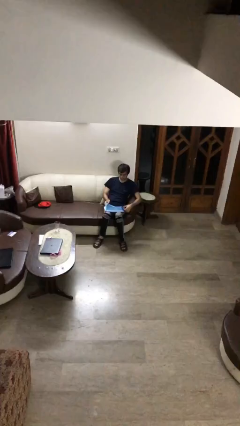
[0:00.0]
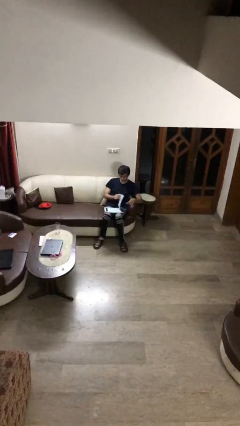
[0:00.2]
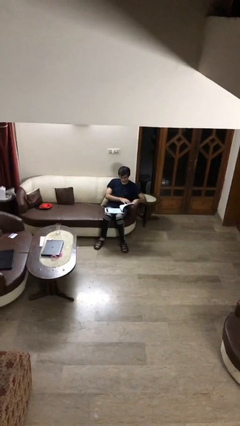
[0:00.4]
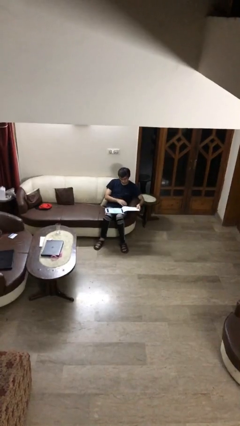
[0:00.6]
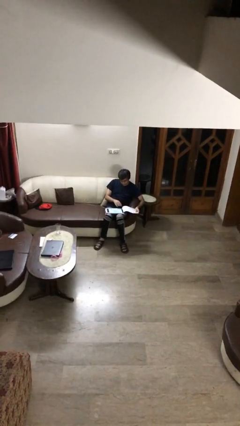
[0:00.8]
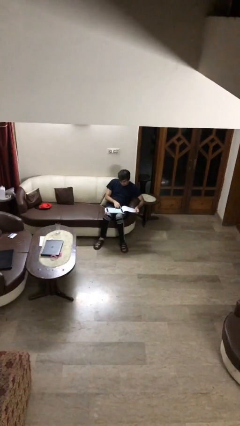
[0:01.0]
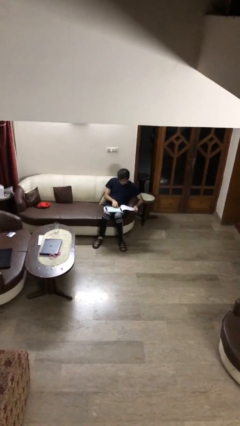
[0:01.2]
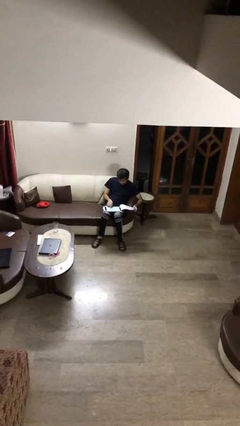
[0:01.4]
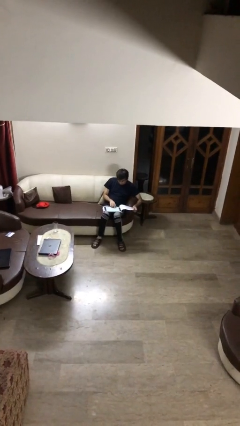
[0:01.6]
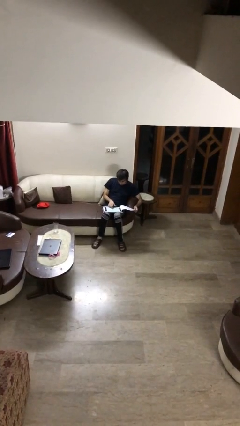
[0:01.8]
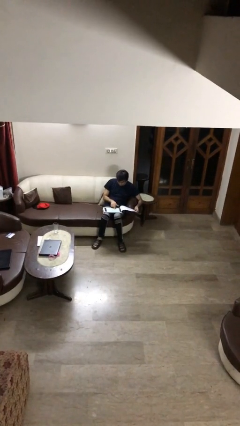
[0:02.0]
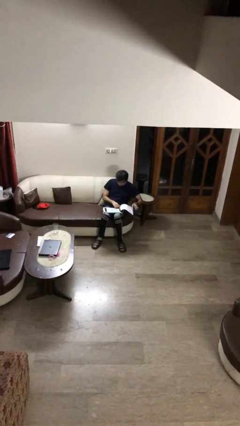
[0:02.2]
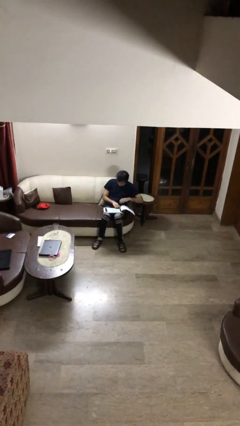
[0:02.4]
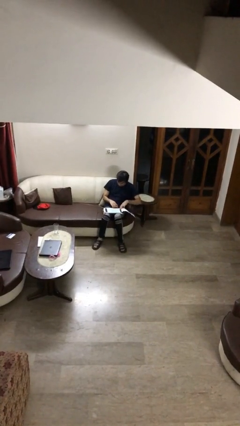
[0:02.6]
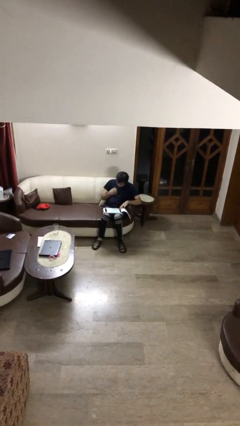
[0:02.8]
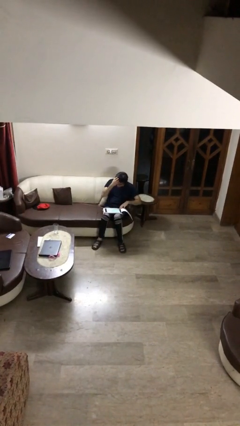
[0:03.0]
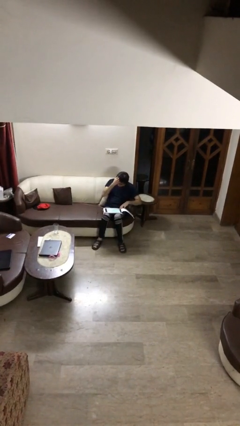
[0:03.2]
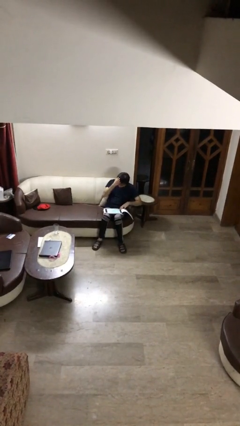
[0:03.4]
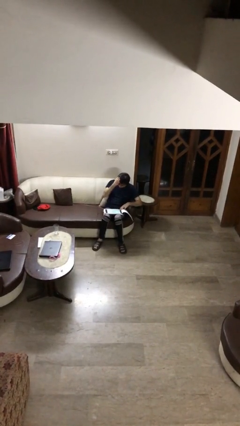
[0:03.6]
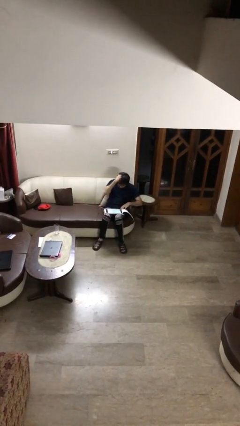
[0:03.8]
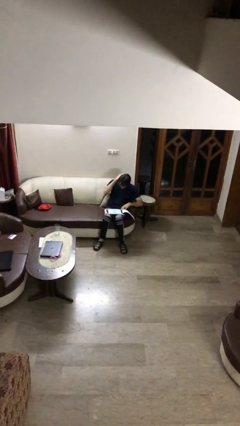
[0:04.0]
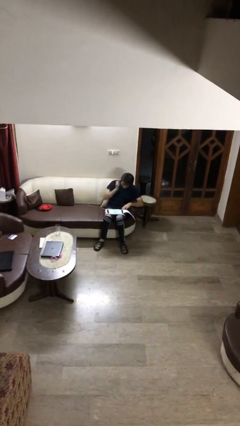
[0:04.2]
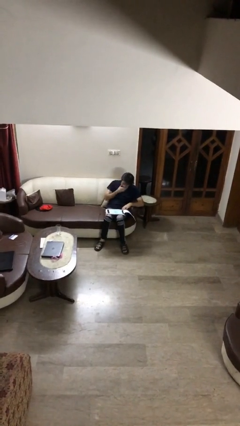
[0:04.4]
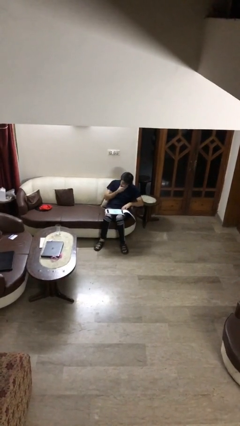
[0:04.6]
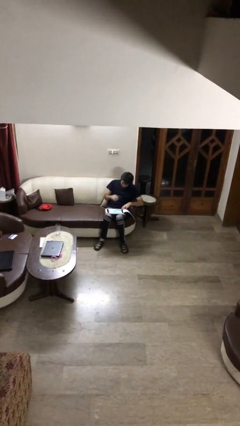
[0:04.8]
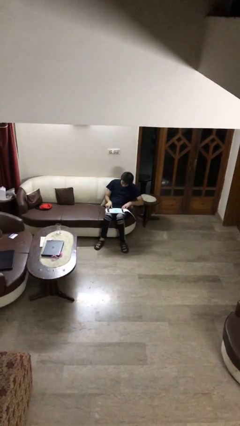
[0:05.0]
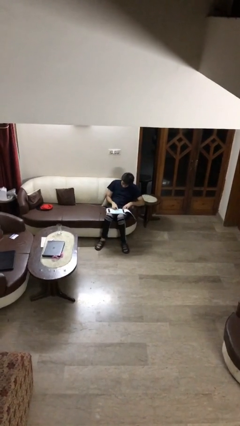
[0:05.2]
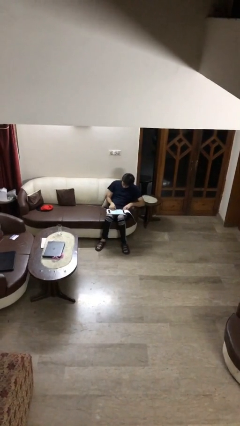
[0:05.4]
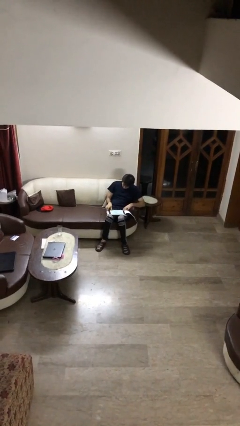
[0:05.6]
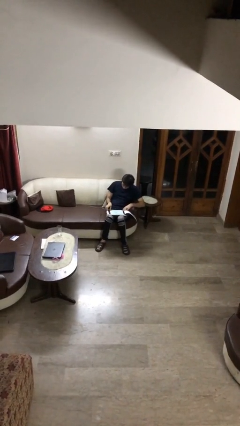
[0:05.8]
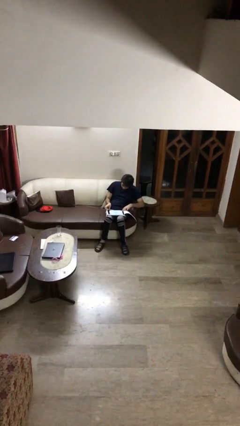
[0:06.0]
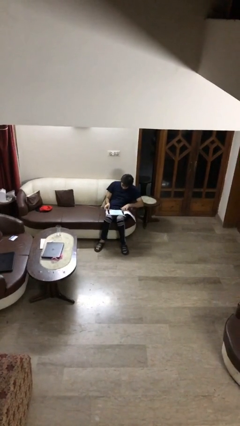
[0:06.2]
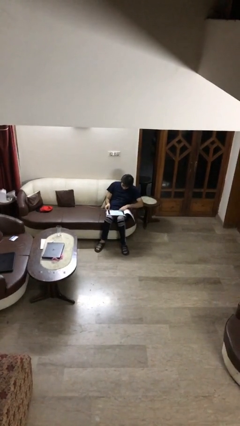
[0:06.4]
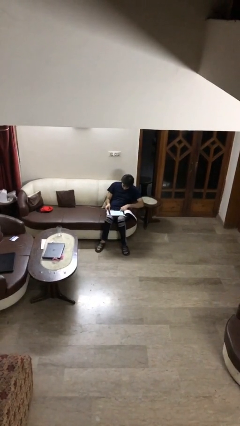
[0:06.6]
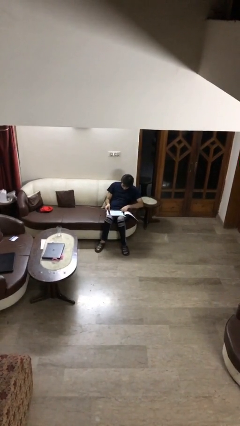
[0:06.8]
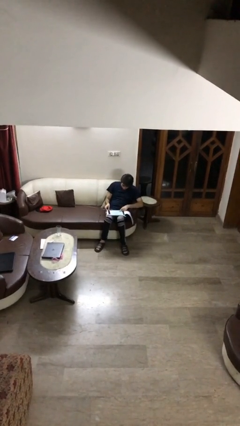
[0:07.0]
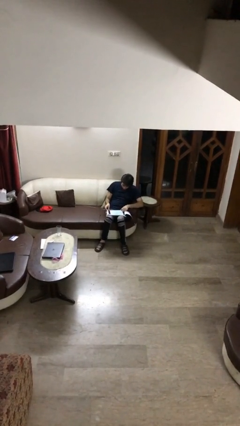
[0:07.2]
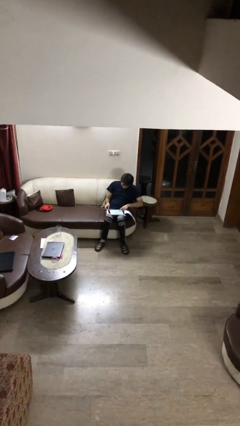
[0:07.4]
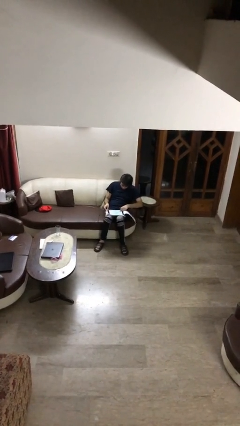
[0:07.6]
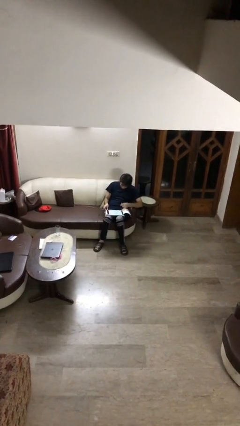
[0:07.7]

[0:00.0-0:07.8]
person reads document

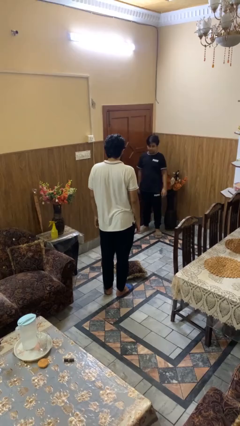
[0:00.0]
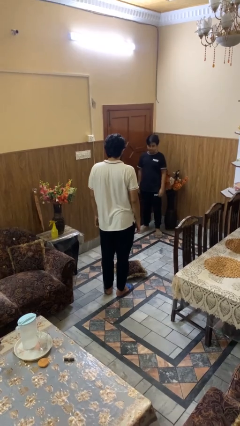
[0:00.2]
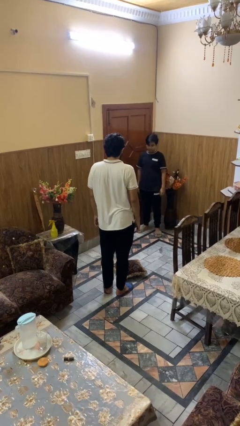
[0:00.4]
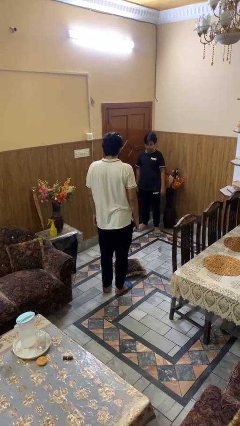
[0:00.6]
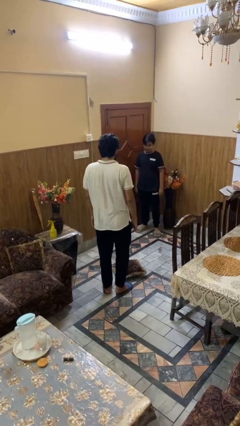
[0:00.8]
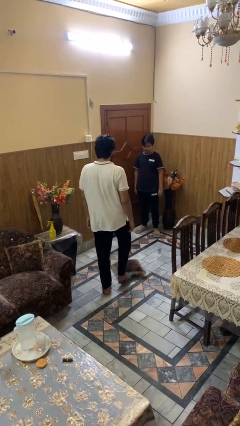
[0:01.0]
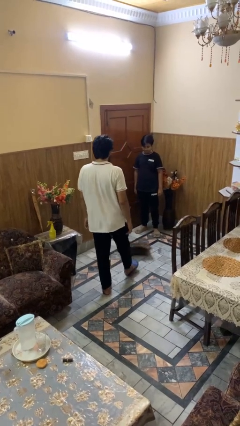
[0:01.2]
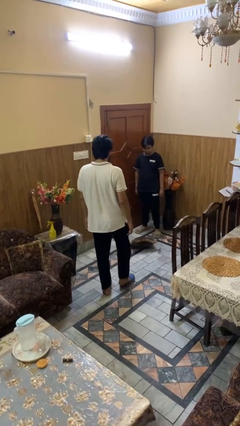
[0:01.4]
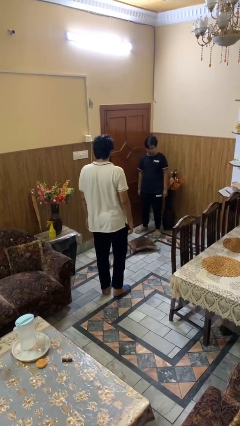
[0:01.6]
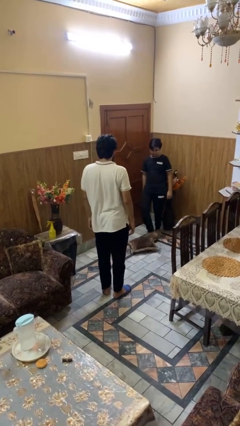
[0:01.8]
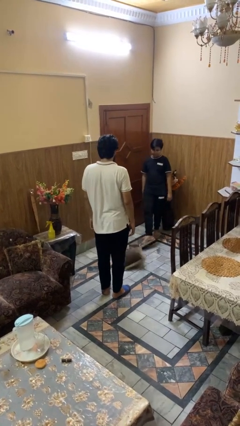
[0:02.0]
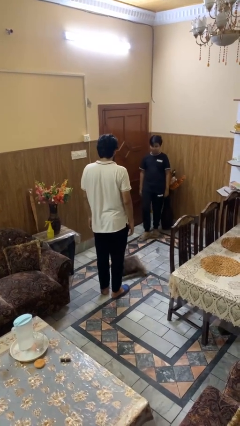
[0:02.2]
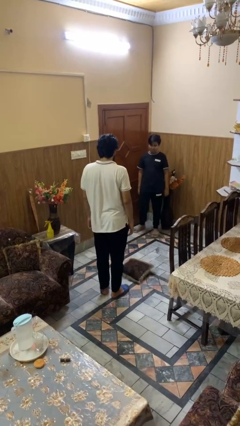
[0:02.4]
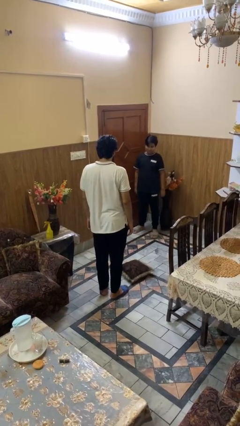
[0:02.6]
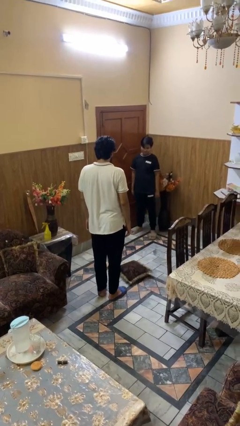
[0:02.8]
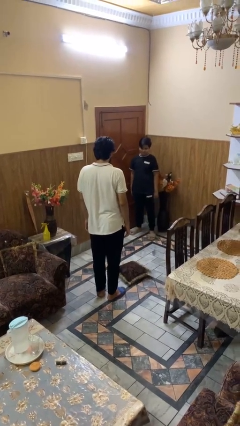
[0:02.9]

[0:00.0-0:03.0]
person kicks object to person

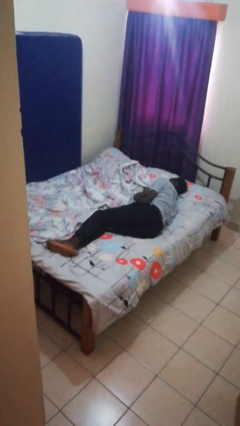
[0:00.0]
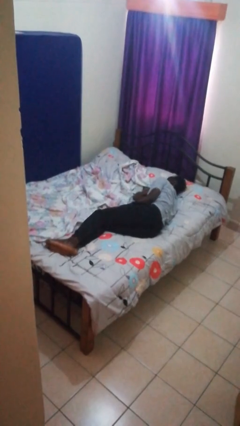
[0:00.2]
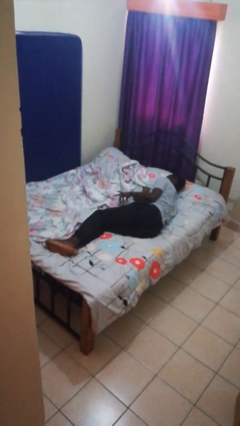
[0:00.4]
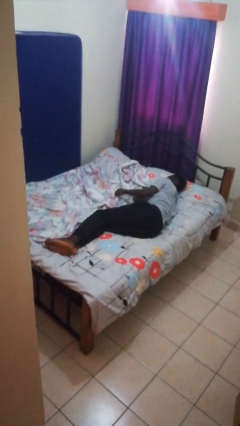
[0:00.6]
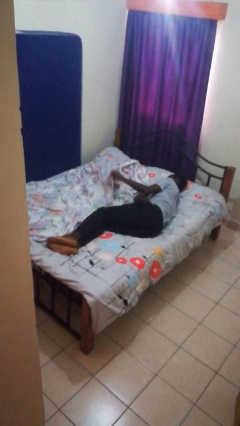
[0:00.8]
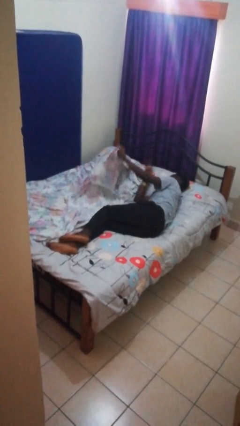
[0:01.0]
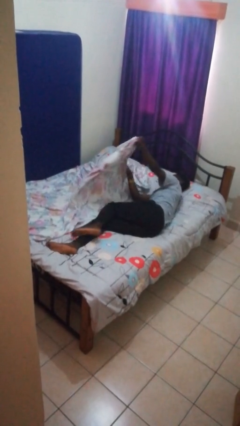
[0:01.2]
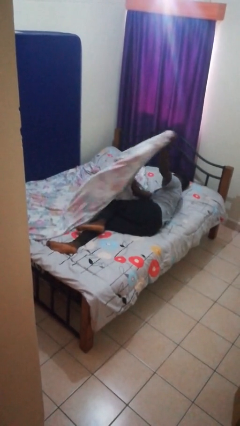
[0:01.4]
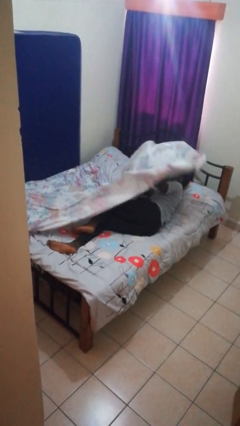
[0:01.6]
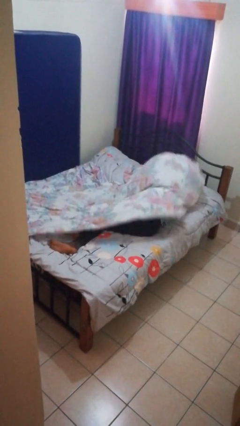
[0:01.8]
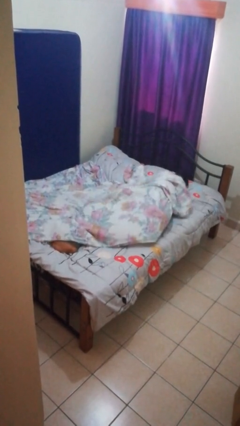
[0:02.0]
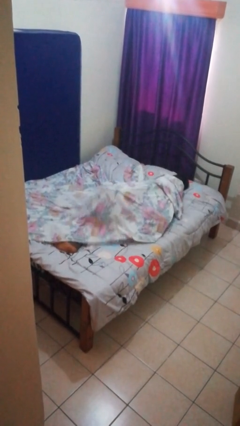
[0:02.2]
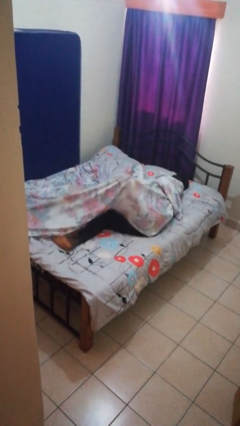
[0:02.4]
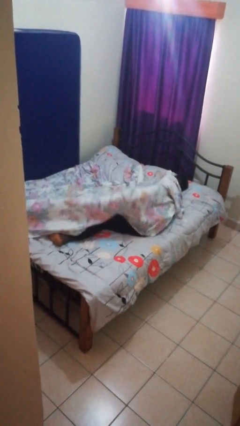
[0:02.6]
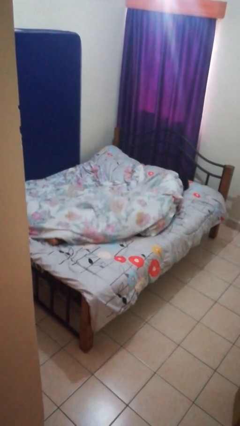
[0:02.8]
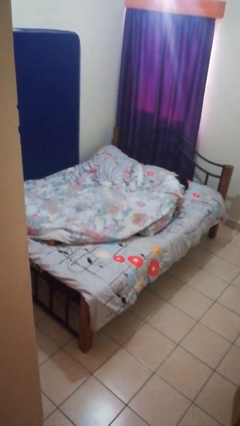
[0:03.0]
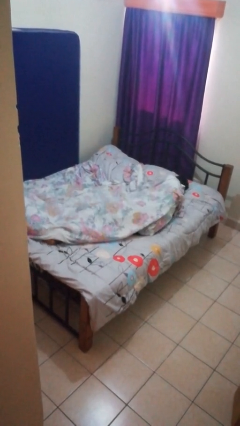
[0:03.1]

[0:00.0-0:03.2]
person covers with bedsheets

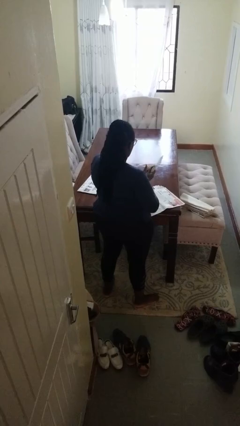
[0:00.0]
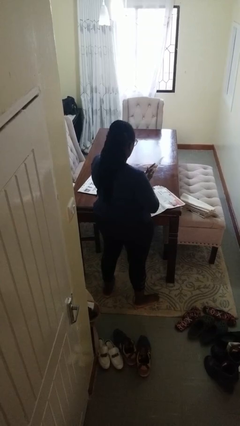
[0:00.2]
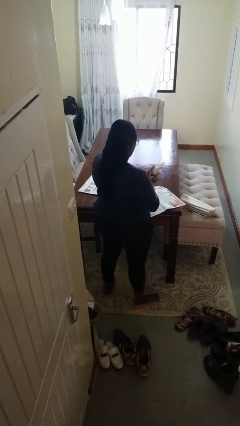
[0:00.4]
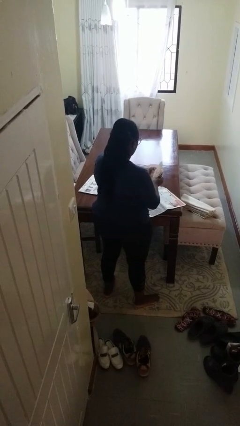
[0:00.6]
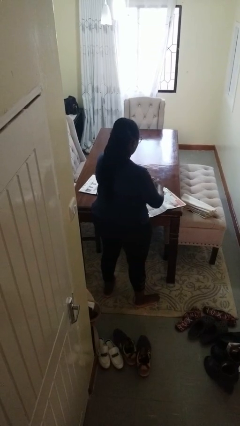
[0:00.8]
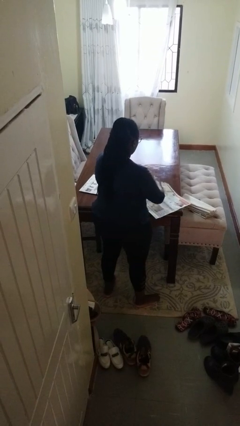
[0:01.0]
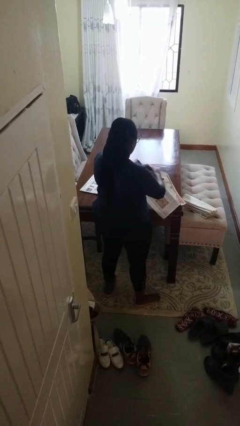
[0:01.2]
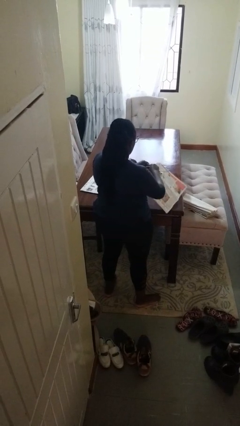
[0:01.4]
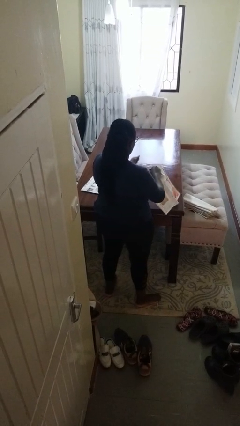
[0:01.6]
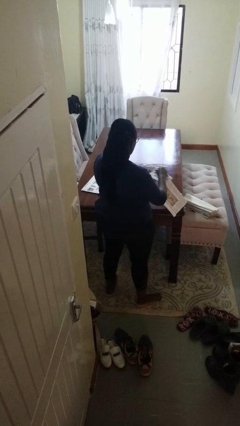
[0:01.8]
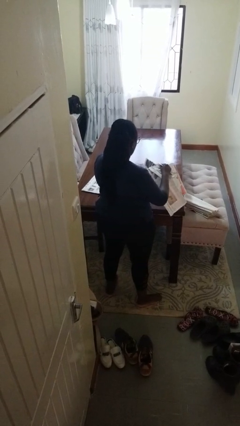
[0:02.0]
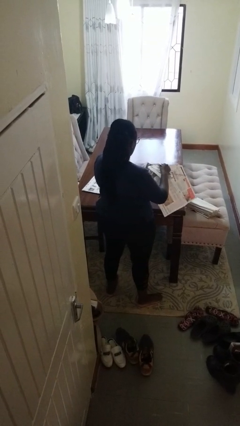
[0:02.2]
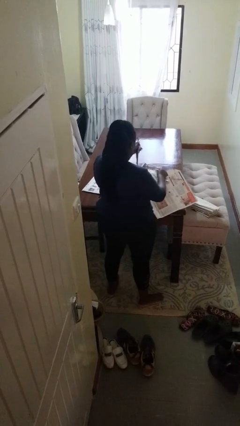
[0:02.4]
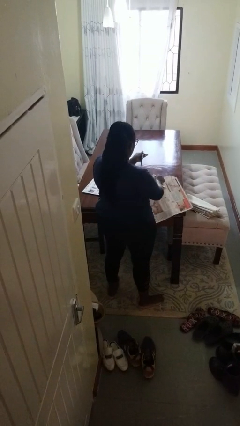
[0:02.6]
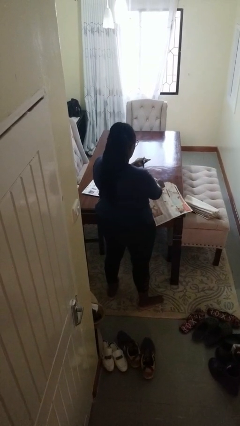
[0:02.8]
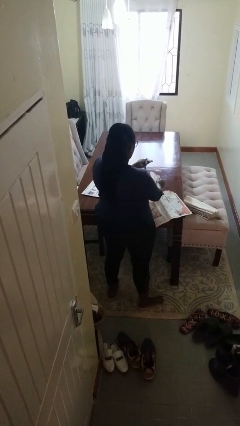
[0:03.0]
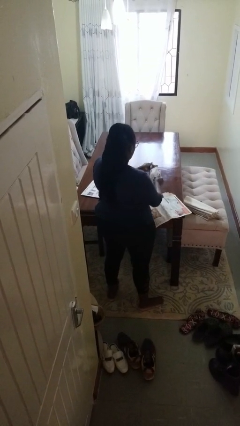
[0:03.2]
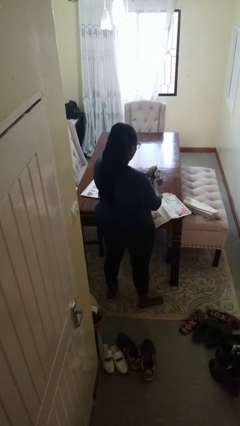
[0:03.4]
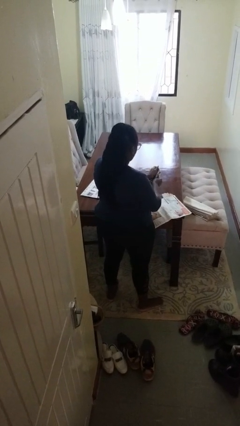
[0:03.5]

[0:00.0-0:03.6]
person tears paper
